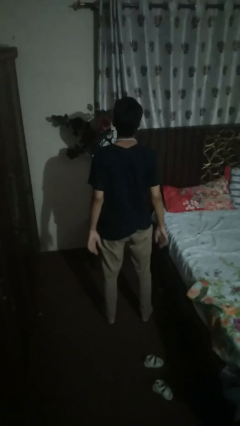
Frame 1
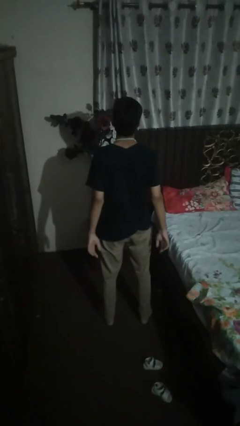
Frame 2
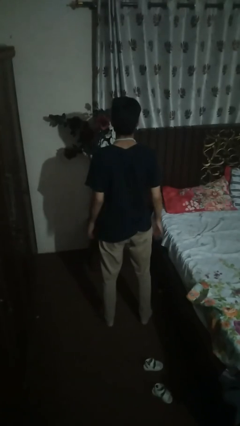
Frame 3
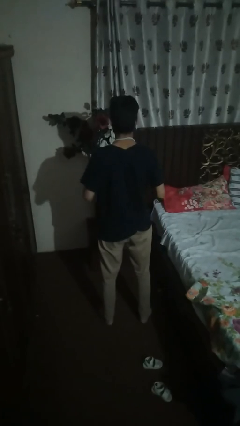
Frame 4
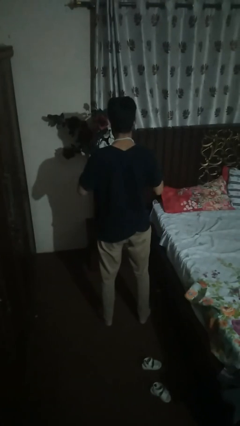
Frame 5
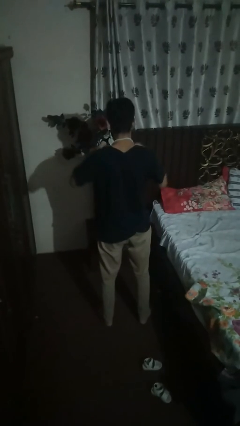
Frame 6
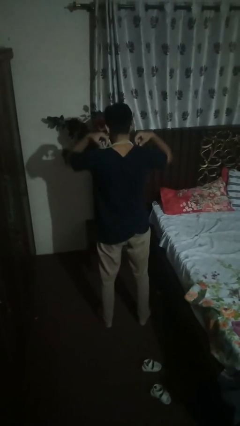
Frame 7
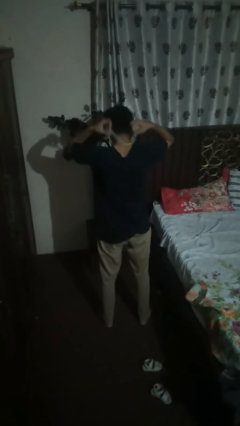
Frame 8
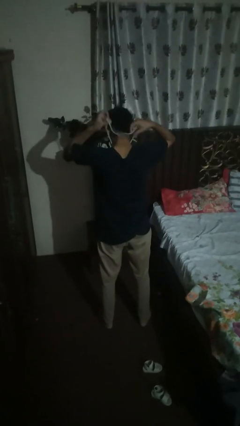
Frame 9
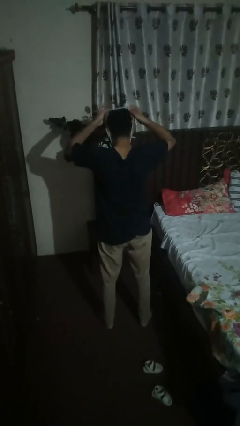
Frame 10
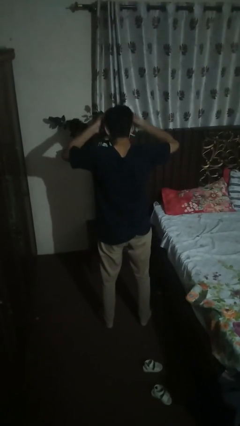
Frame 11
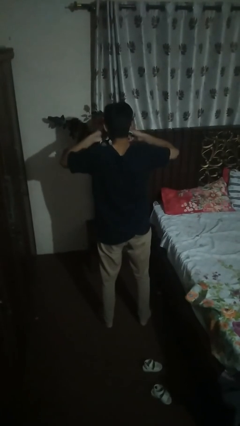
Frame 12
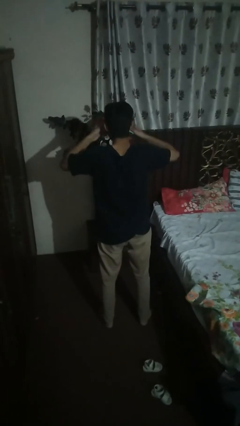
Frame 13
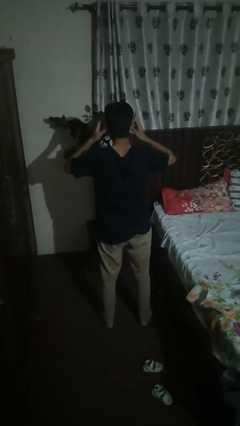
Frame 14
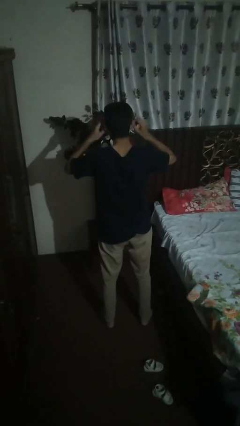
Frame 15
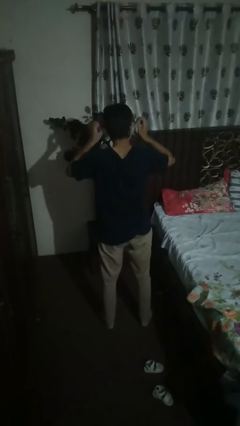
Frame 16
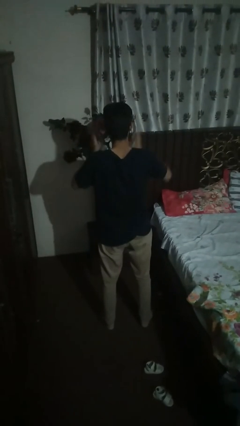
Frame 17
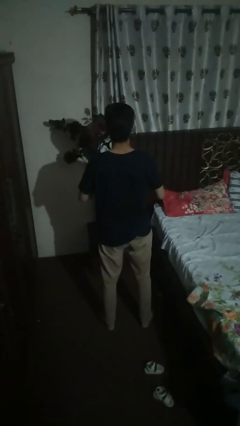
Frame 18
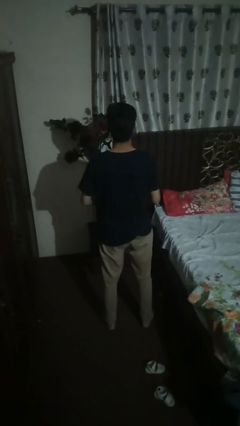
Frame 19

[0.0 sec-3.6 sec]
person takes off necklace

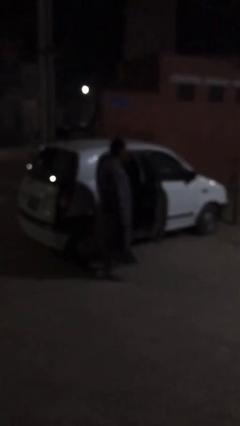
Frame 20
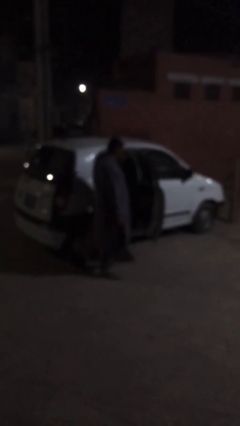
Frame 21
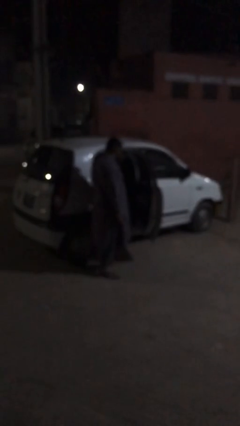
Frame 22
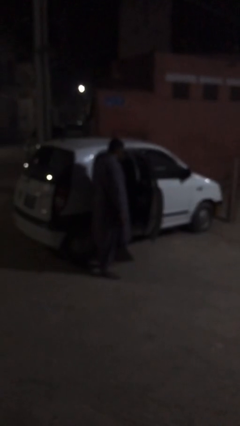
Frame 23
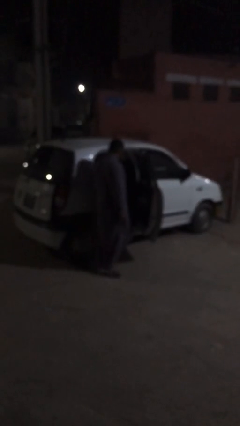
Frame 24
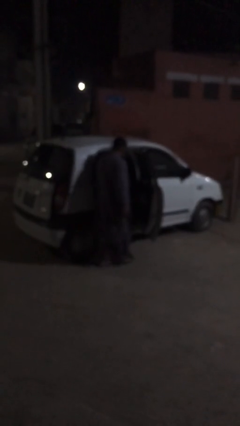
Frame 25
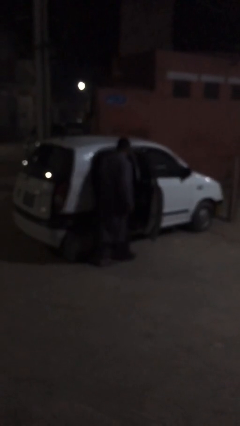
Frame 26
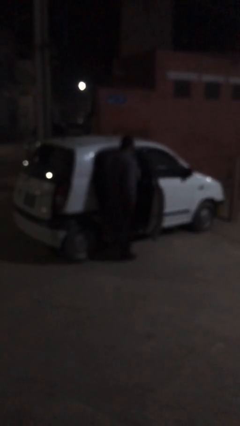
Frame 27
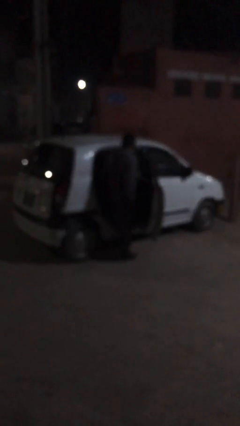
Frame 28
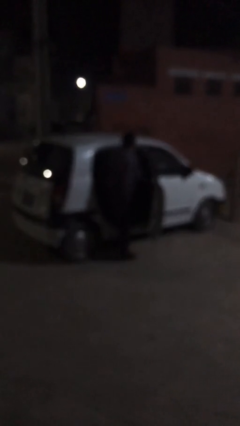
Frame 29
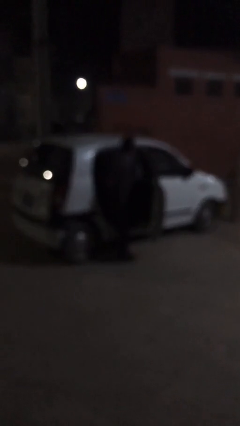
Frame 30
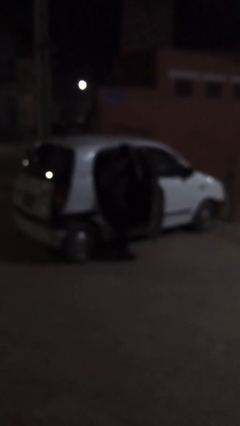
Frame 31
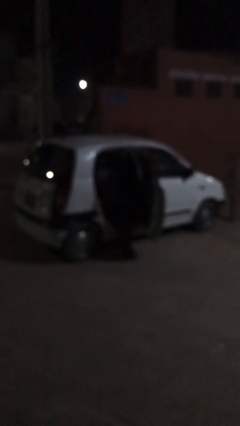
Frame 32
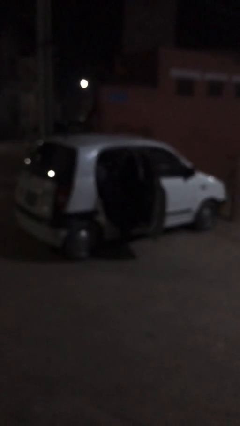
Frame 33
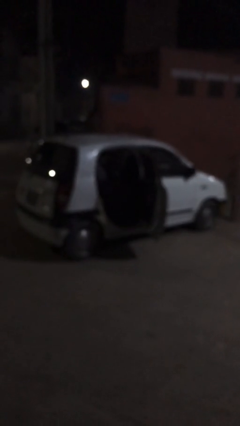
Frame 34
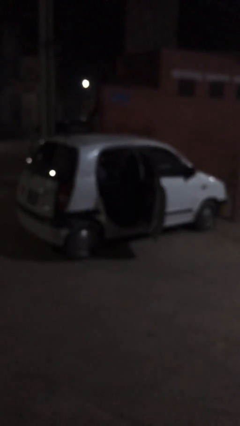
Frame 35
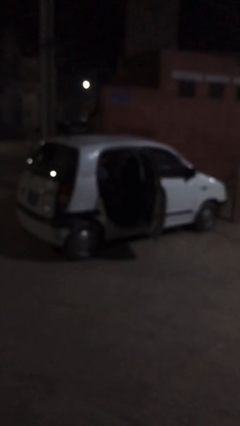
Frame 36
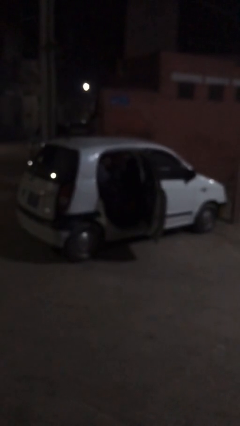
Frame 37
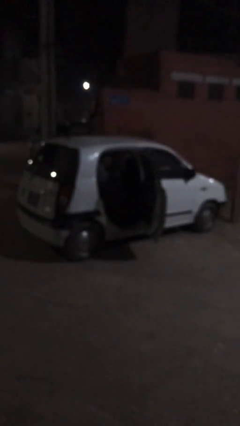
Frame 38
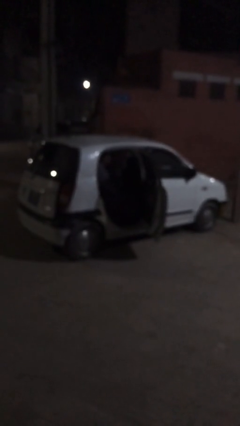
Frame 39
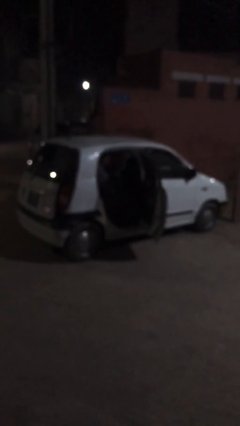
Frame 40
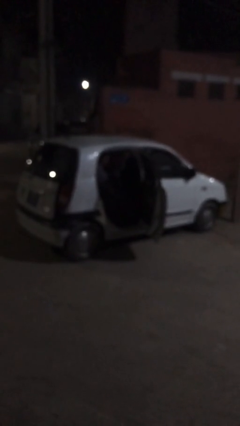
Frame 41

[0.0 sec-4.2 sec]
person enters car

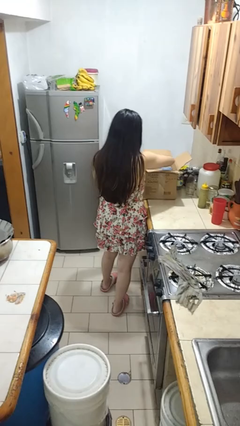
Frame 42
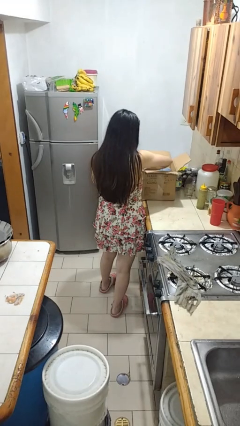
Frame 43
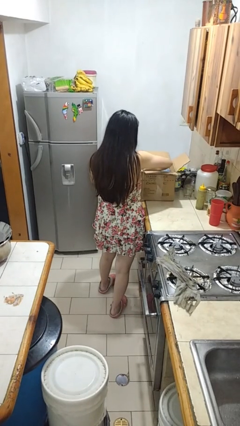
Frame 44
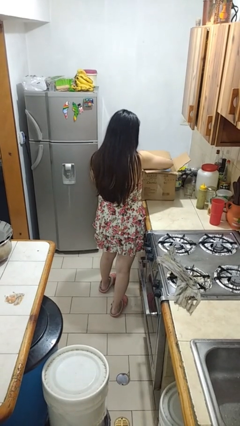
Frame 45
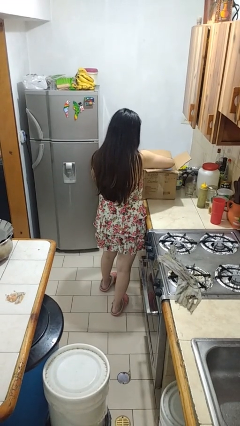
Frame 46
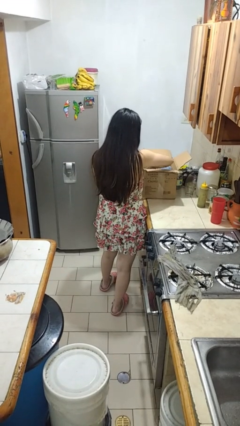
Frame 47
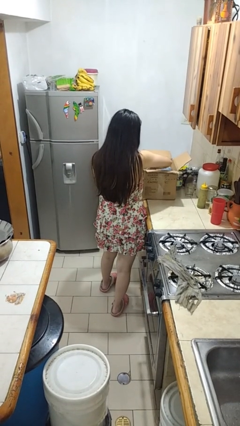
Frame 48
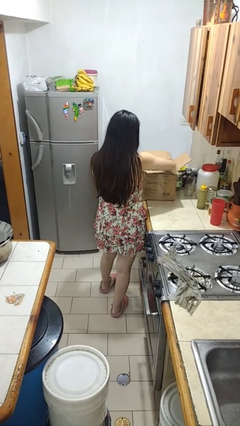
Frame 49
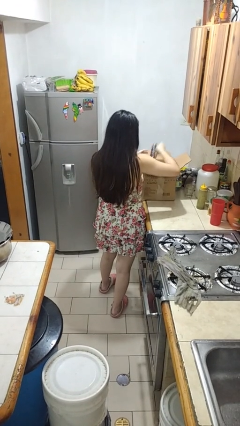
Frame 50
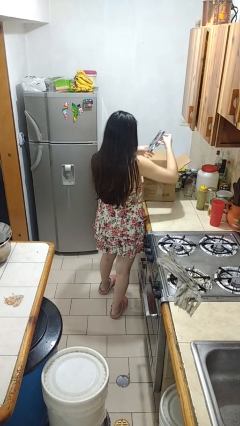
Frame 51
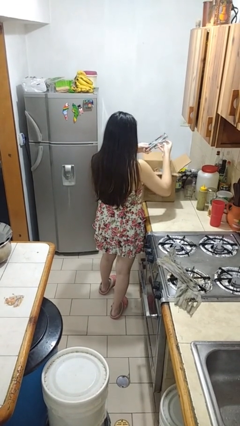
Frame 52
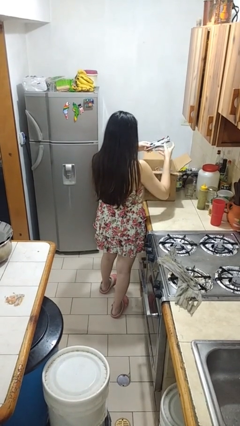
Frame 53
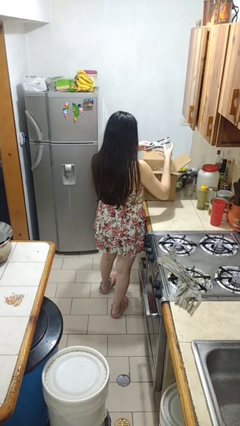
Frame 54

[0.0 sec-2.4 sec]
person takes object from box

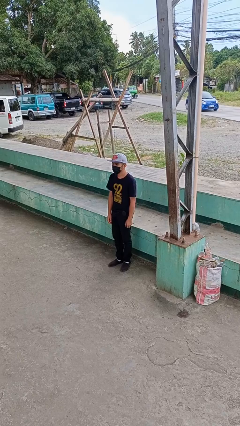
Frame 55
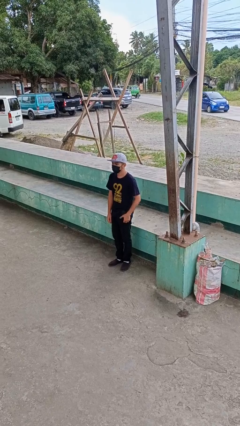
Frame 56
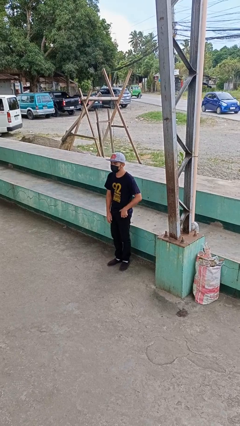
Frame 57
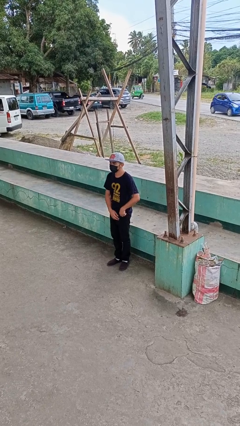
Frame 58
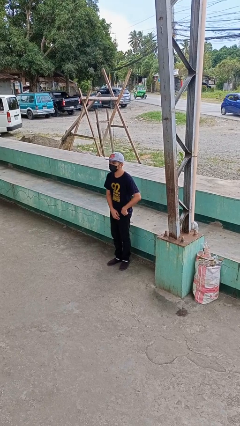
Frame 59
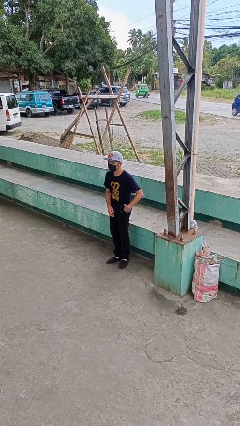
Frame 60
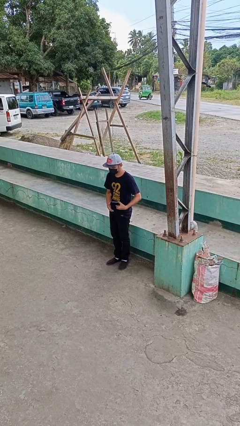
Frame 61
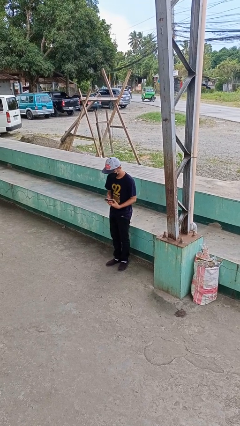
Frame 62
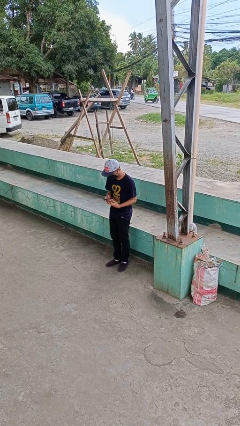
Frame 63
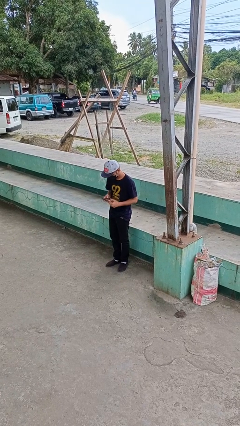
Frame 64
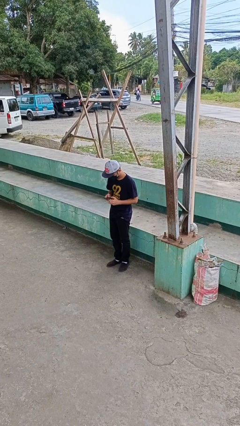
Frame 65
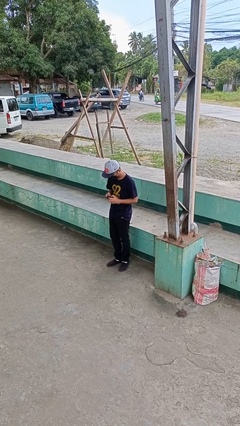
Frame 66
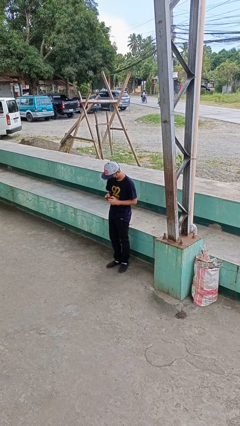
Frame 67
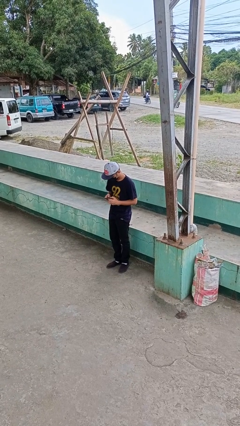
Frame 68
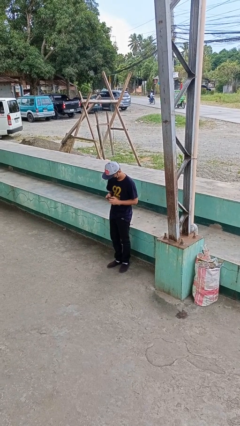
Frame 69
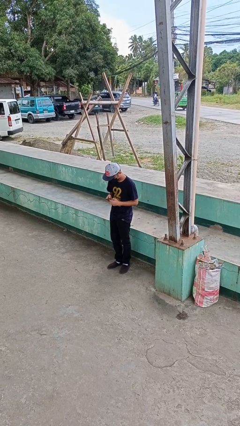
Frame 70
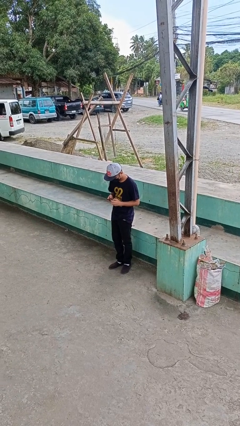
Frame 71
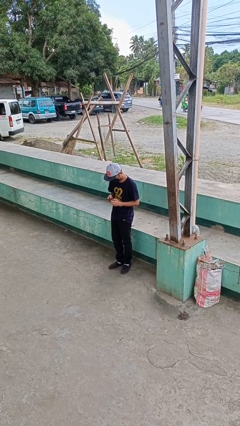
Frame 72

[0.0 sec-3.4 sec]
person takes phone from pocket

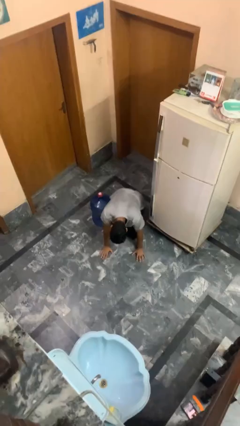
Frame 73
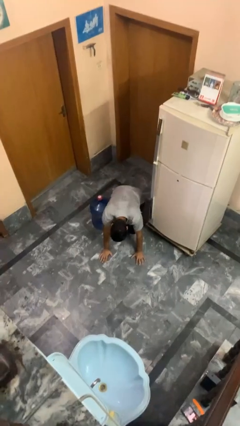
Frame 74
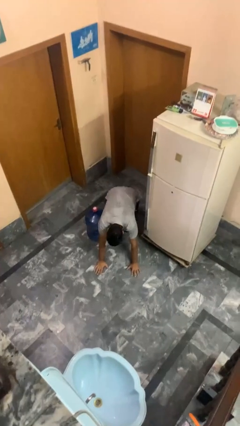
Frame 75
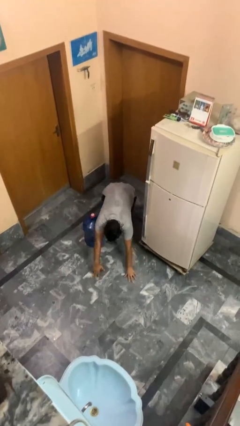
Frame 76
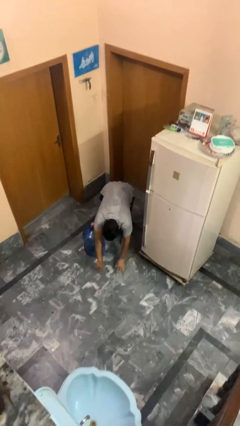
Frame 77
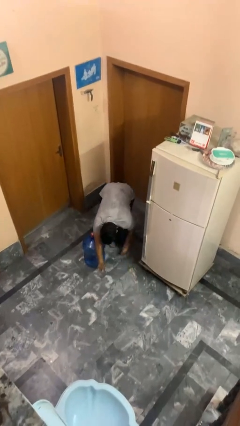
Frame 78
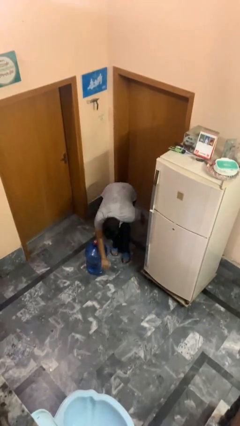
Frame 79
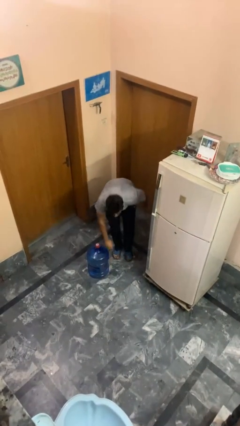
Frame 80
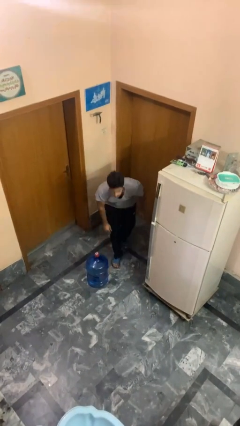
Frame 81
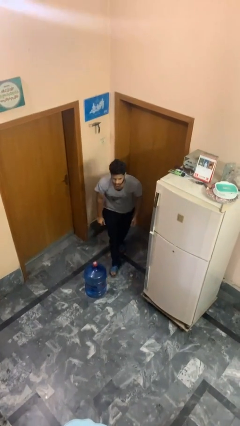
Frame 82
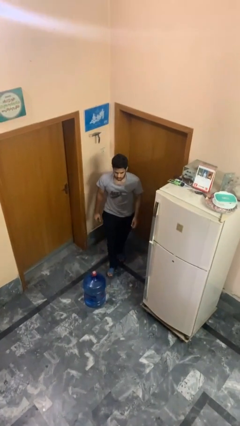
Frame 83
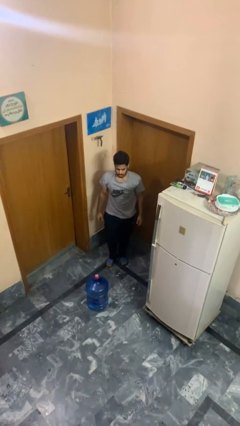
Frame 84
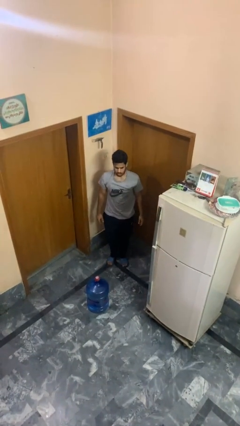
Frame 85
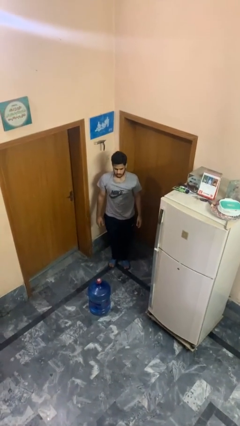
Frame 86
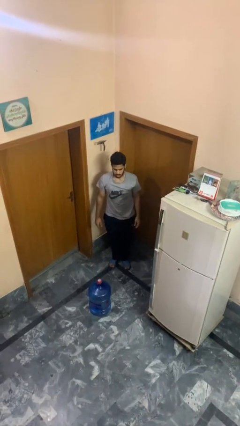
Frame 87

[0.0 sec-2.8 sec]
person stands up from floor

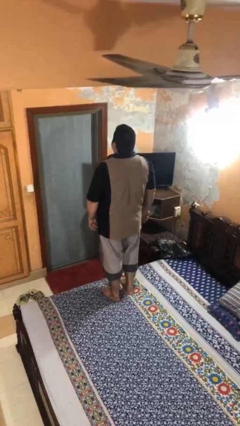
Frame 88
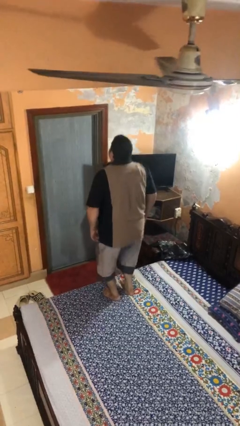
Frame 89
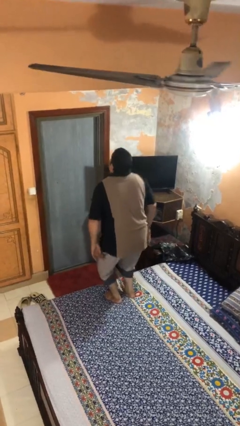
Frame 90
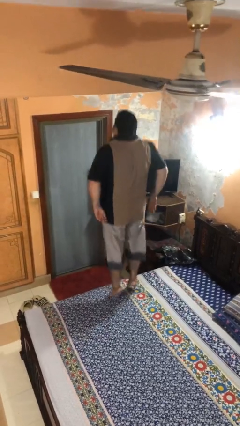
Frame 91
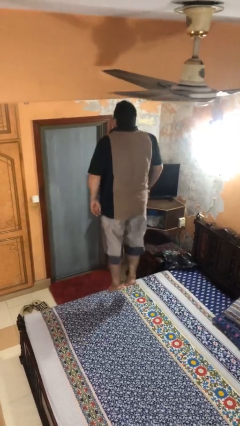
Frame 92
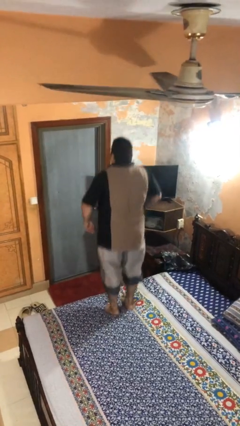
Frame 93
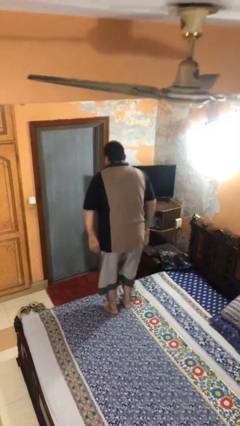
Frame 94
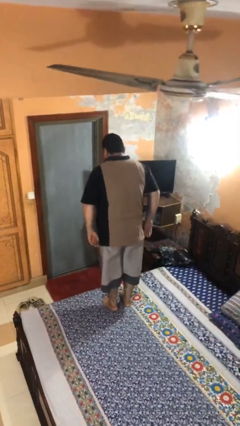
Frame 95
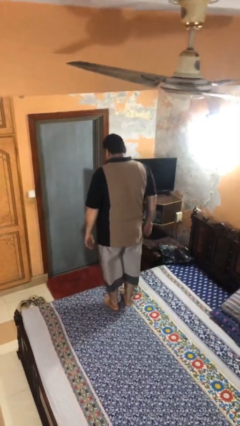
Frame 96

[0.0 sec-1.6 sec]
person jumps on bed
